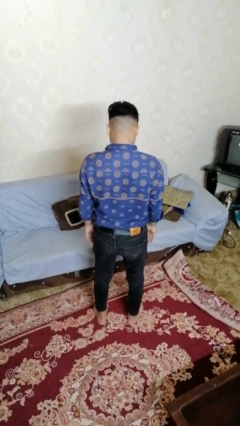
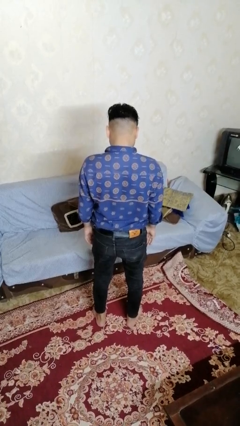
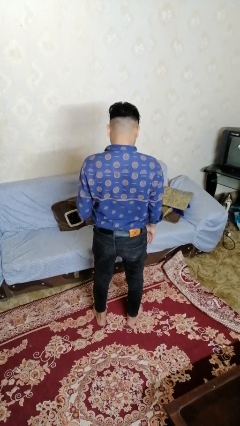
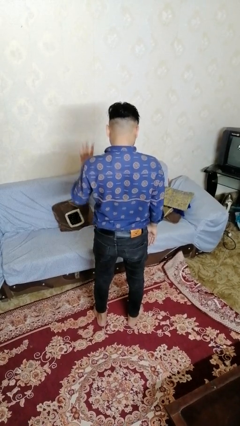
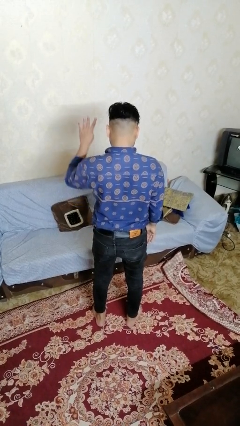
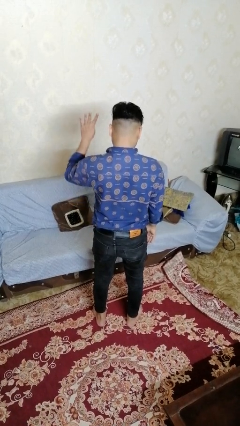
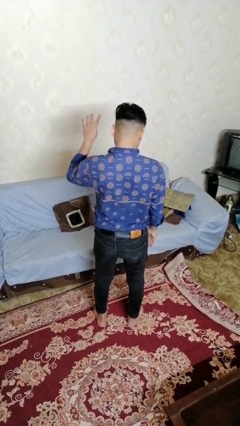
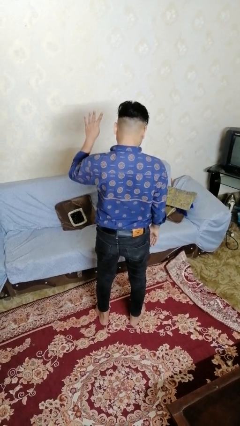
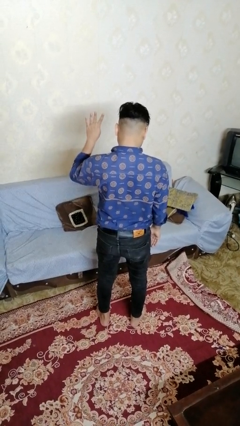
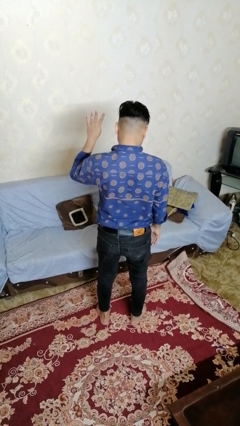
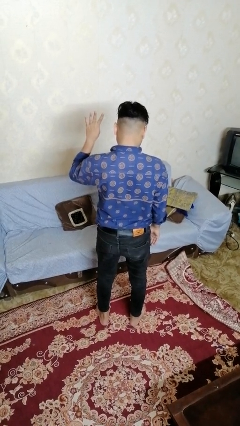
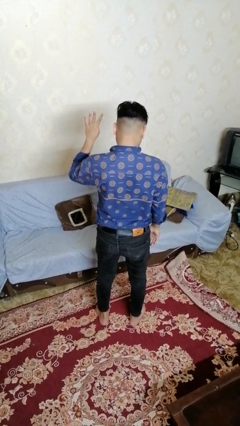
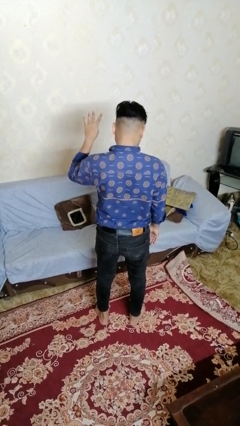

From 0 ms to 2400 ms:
person gestures number four

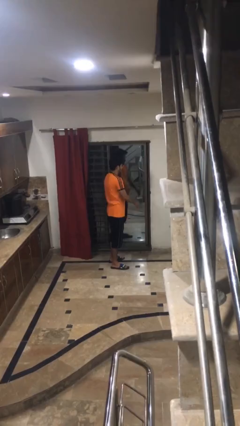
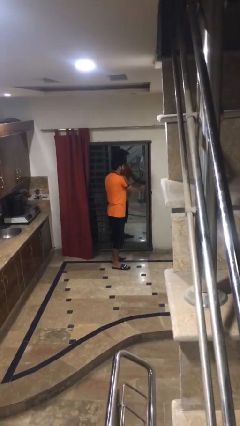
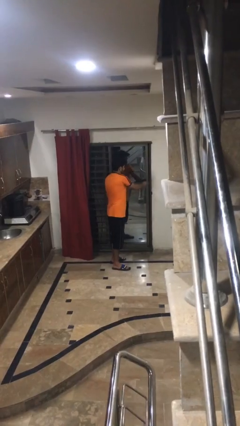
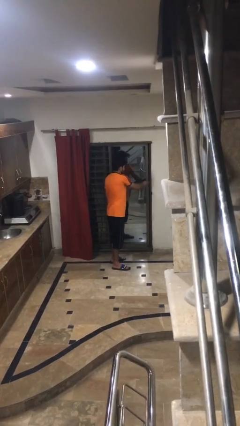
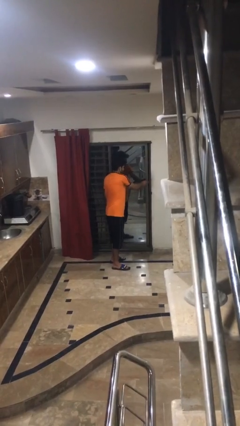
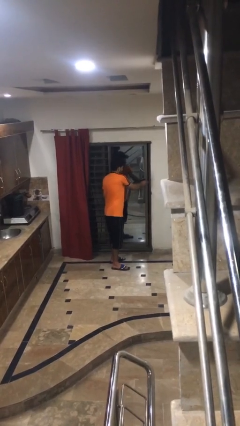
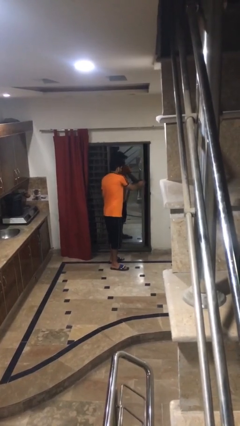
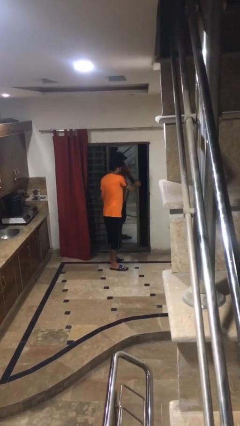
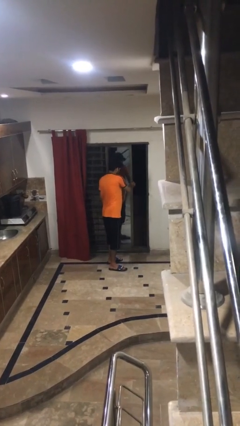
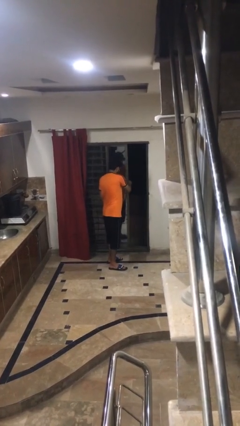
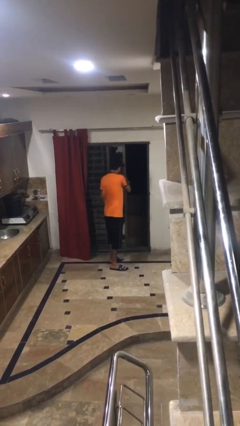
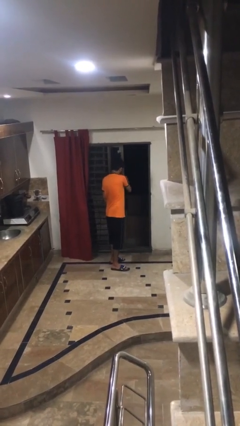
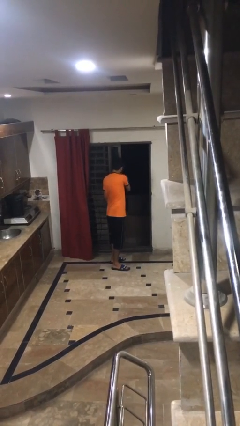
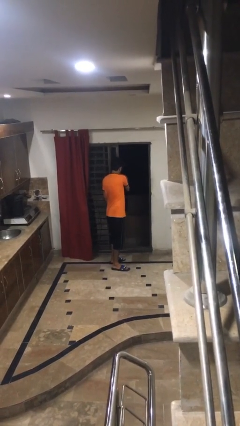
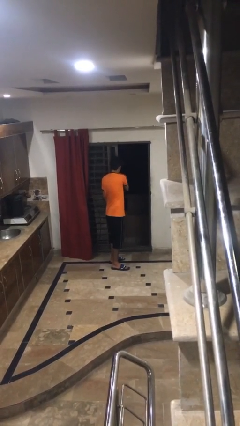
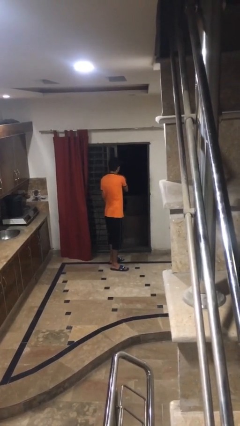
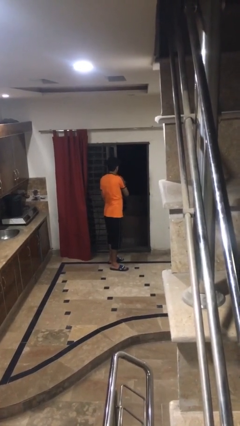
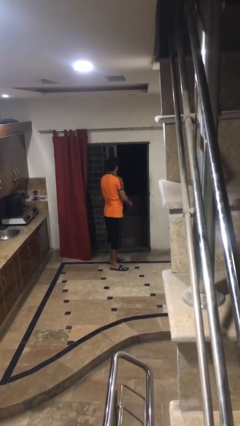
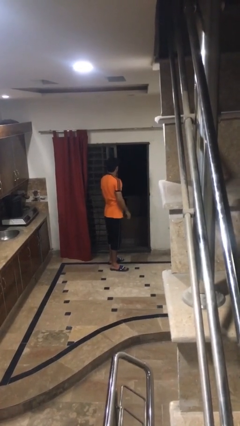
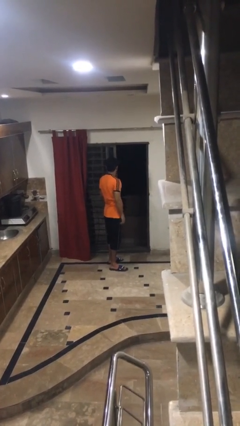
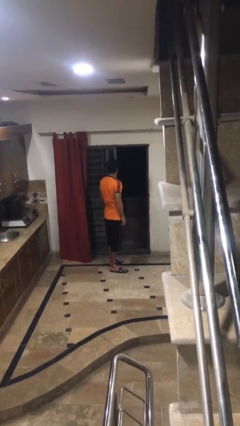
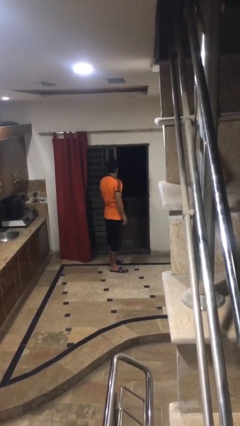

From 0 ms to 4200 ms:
person opens sliding door

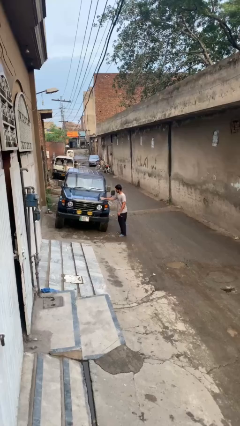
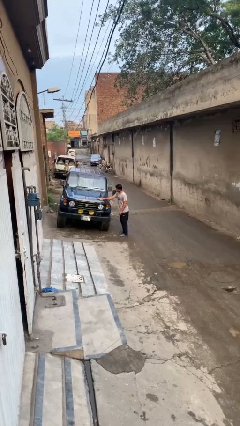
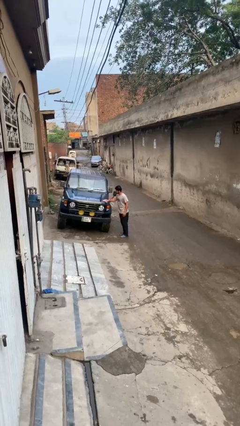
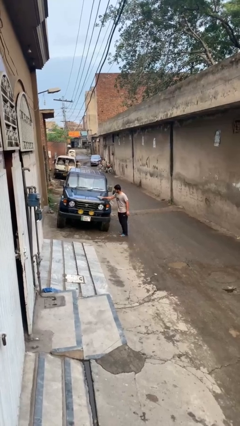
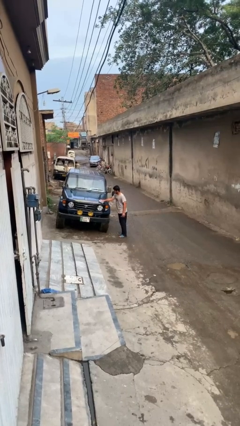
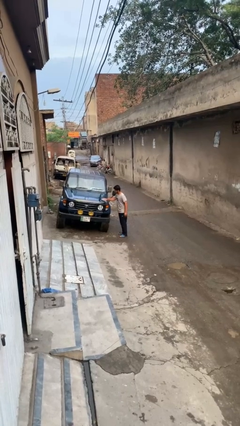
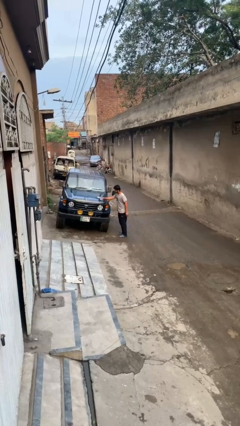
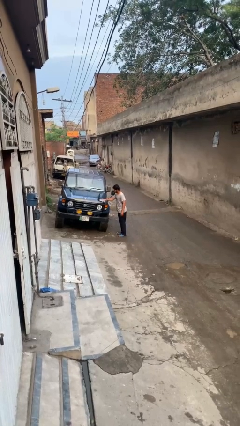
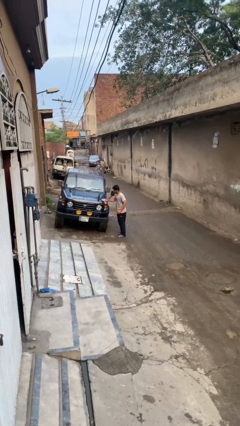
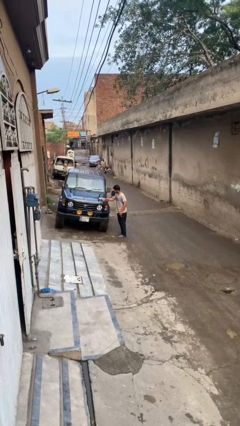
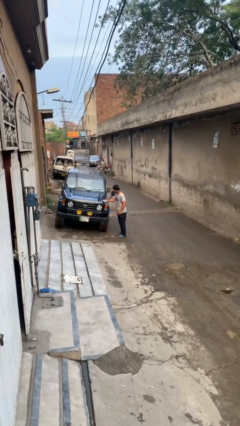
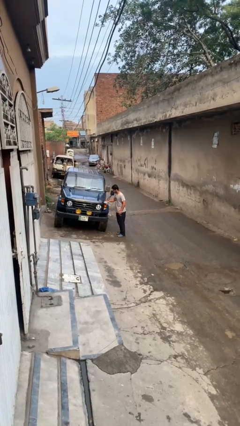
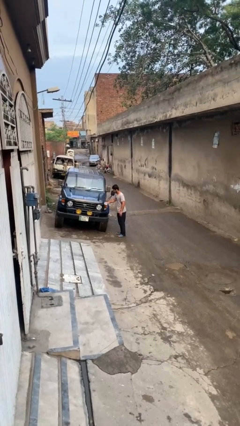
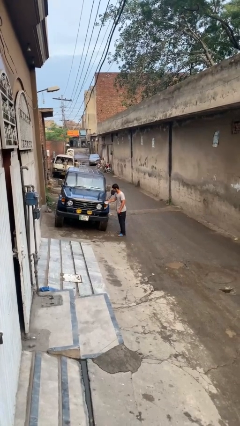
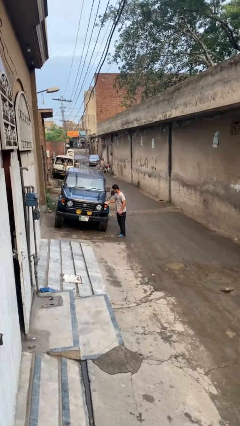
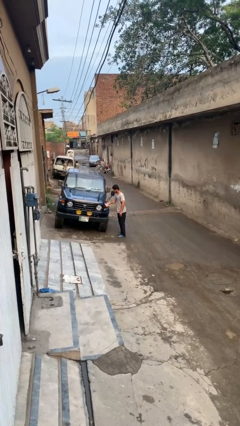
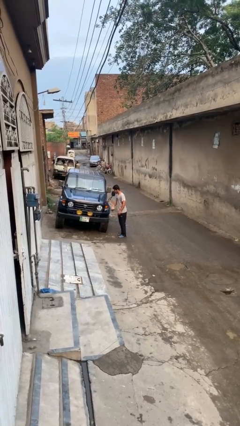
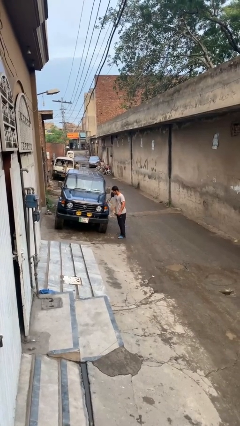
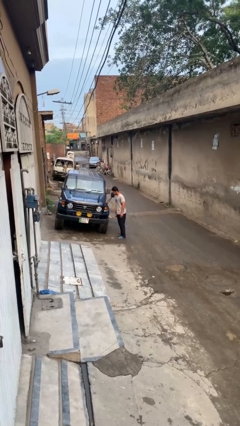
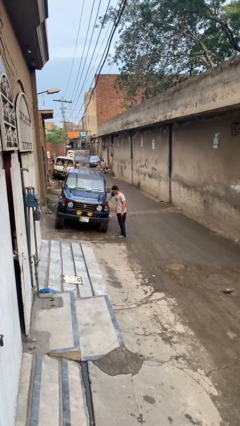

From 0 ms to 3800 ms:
person polishes car with rag

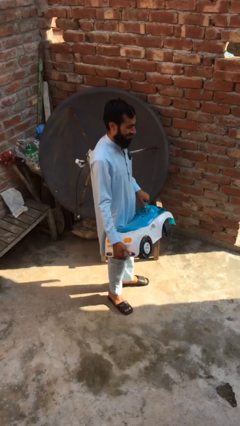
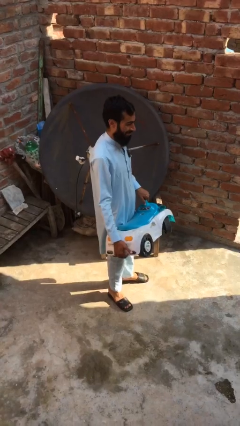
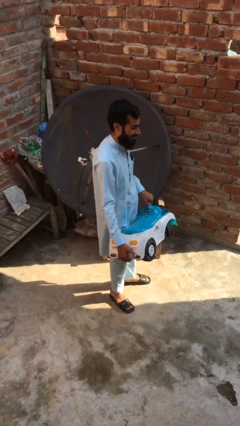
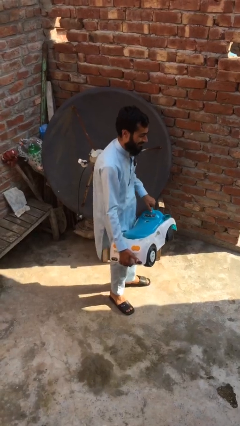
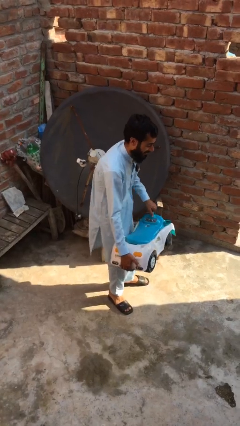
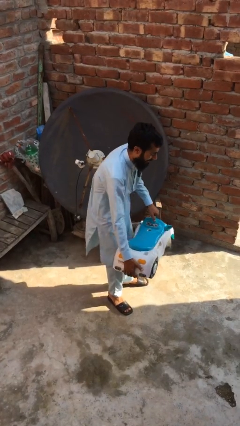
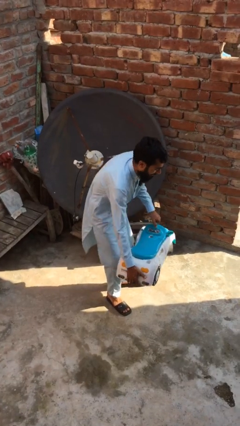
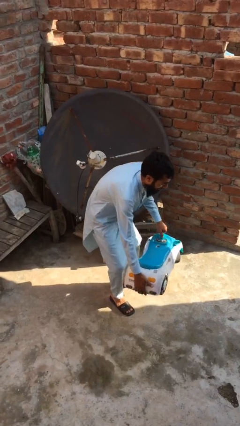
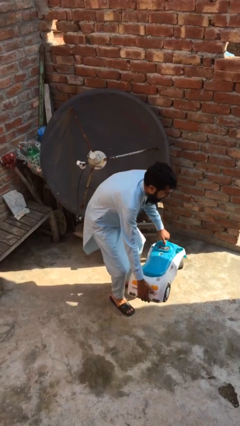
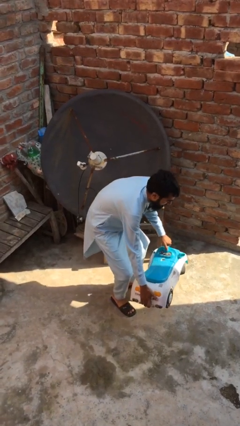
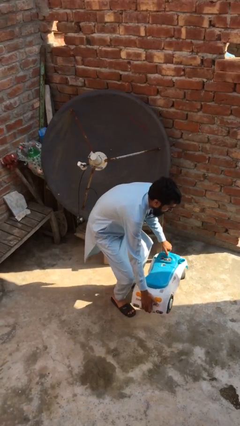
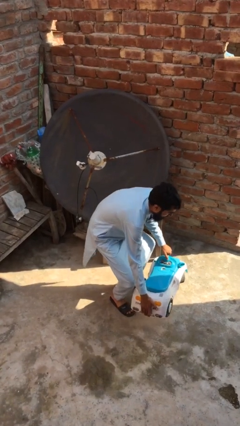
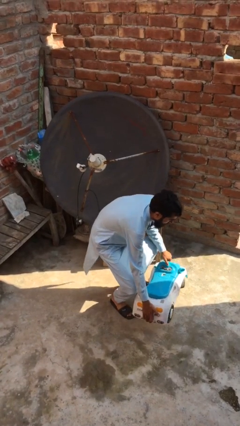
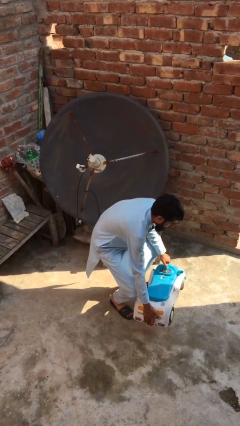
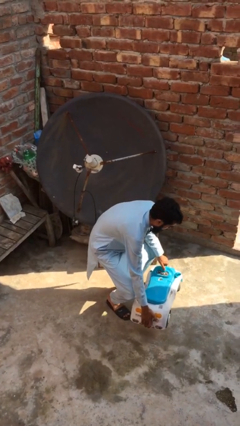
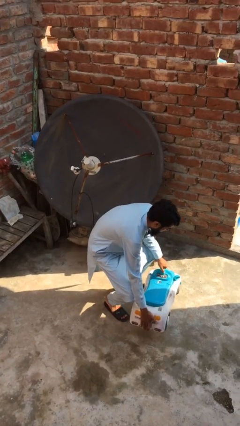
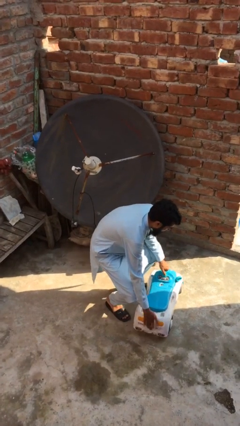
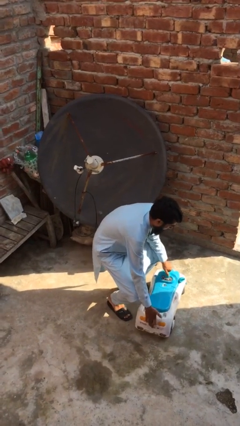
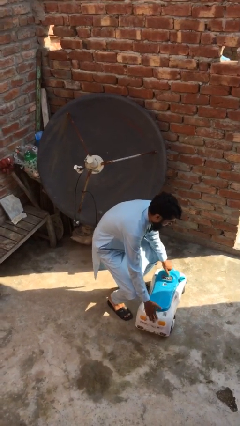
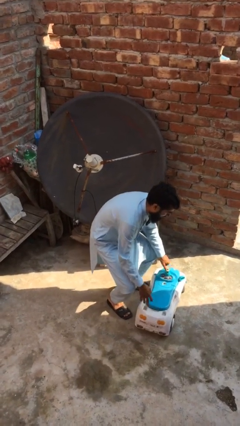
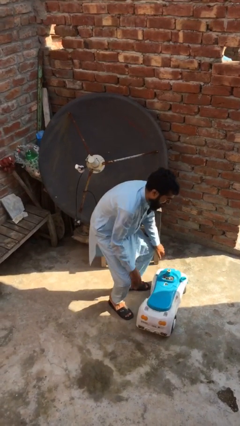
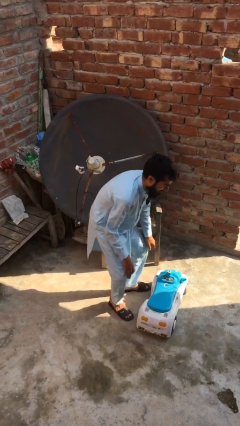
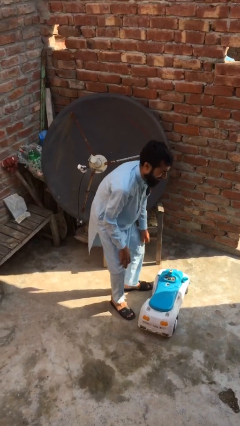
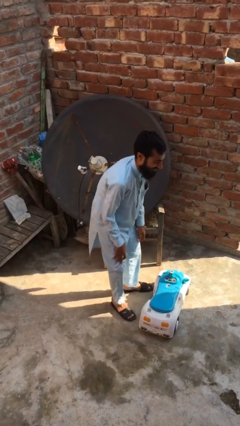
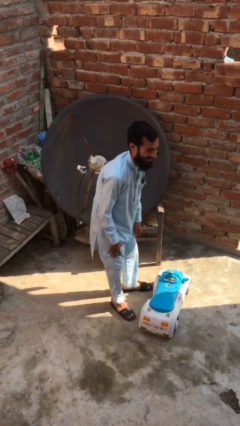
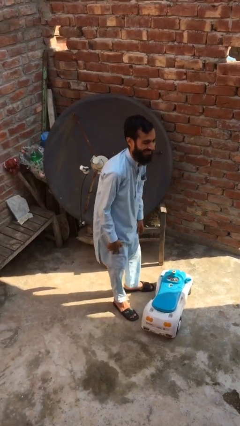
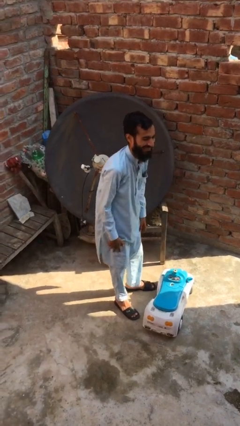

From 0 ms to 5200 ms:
person puts down object on floor

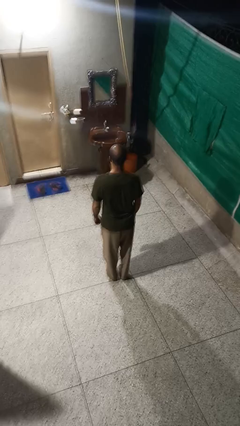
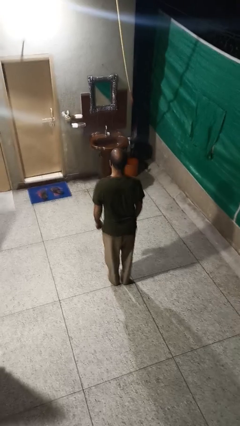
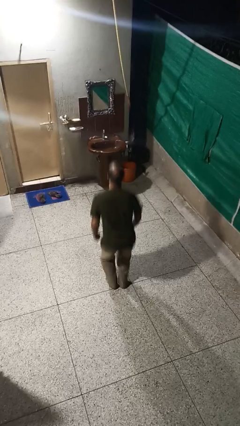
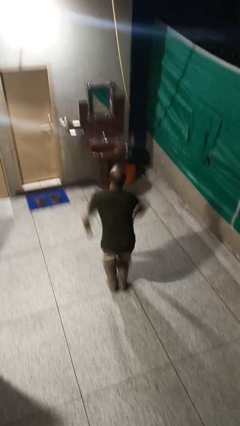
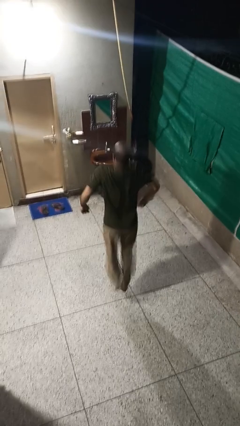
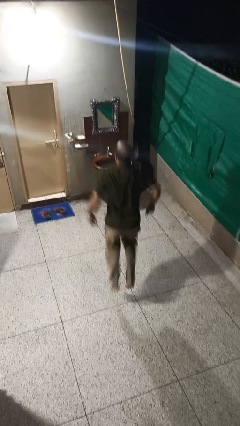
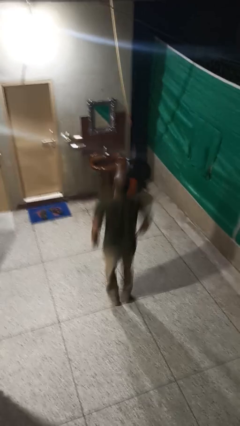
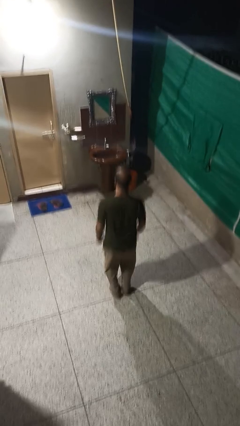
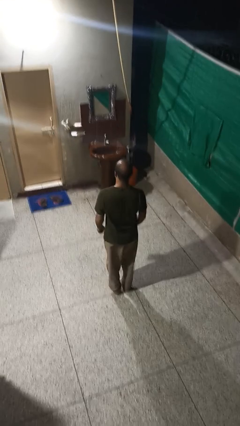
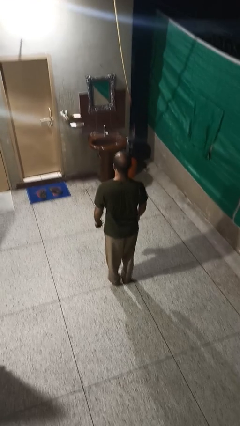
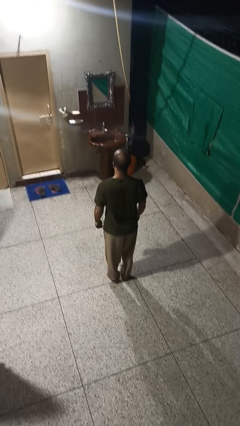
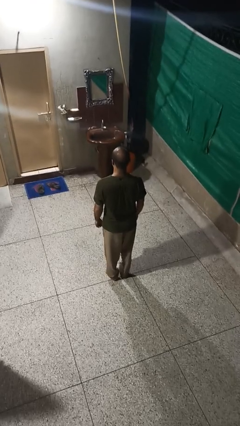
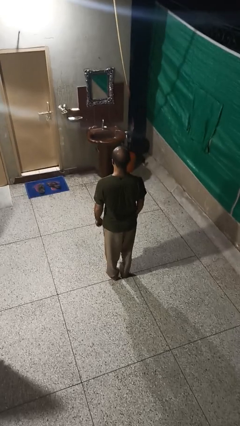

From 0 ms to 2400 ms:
person jumps
